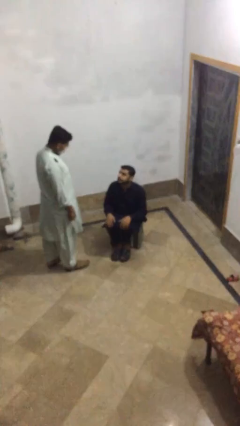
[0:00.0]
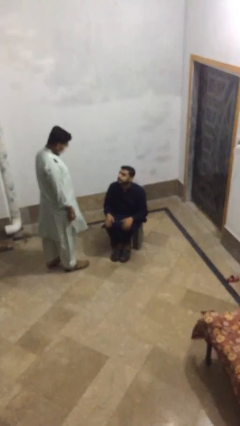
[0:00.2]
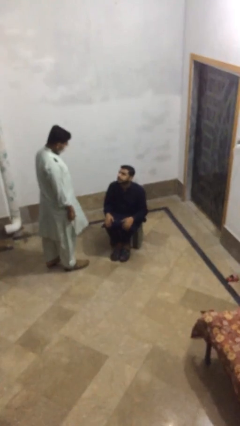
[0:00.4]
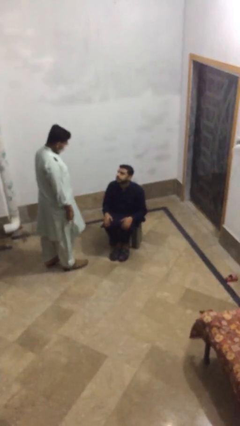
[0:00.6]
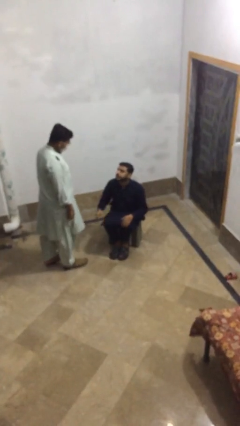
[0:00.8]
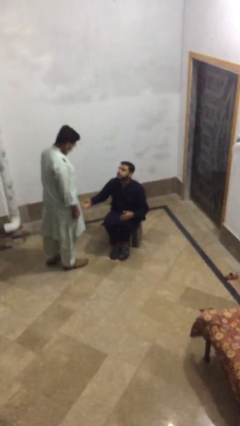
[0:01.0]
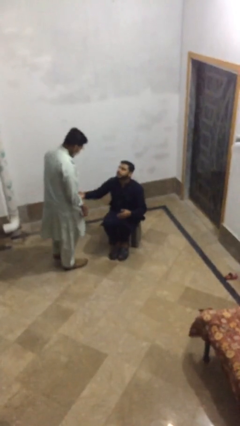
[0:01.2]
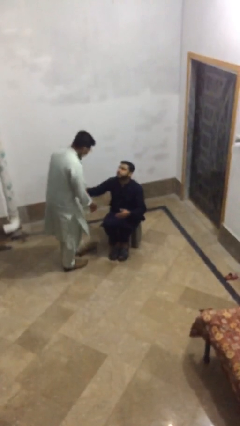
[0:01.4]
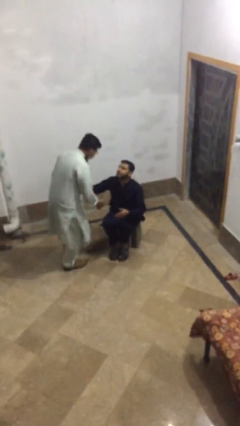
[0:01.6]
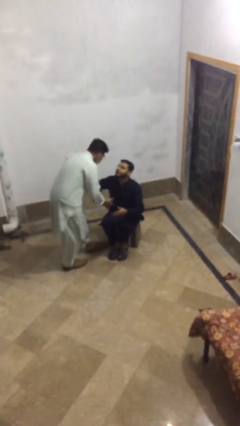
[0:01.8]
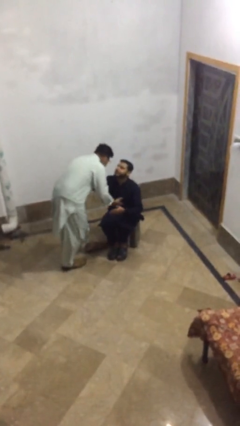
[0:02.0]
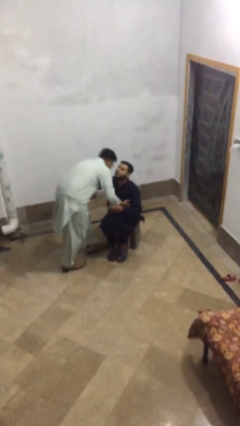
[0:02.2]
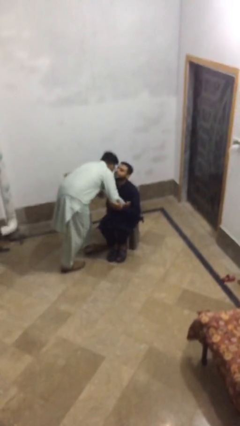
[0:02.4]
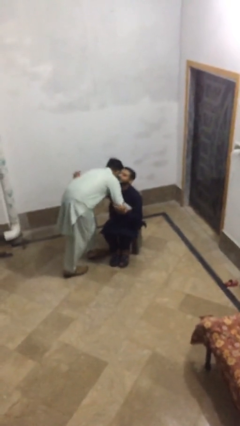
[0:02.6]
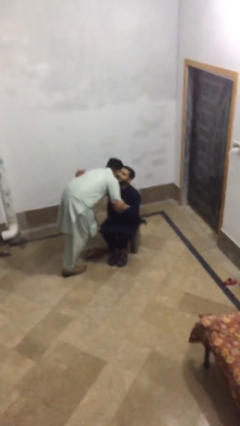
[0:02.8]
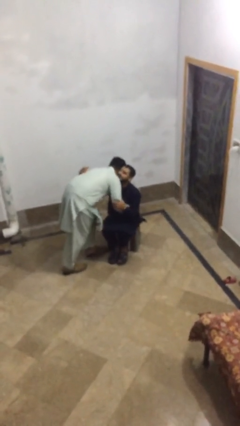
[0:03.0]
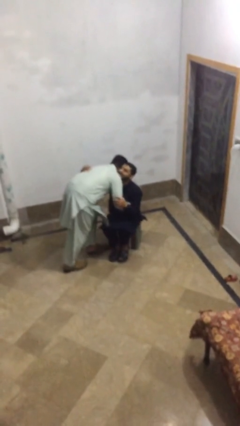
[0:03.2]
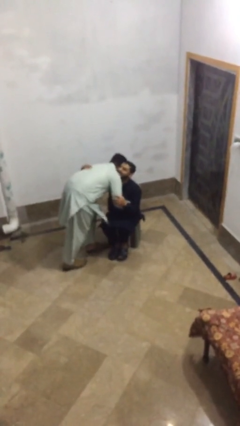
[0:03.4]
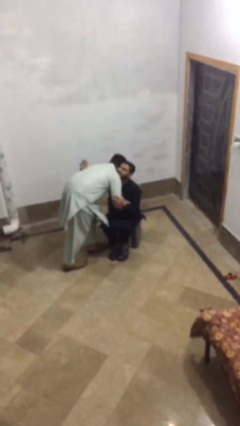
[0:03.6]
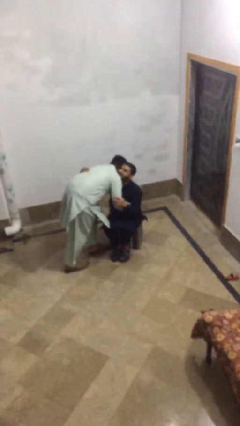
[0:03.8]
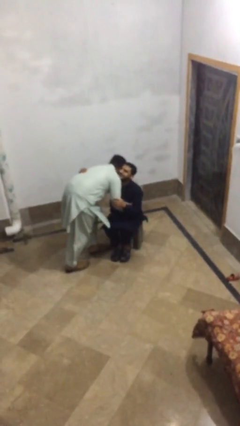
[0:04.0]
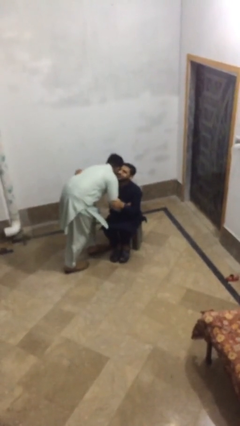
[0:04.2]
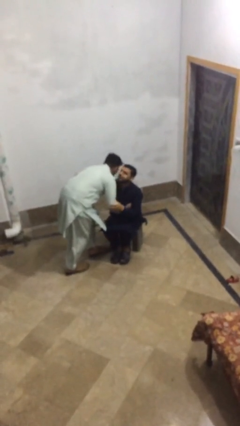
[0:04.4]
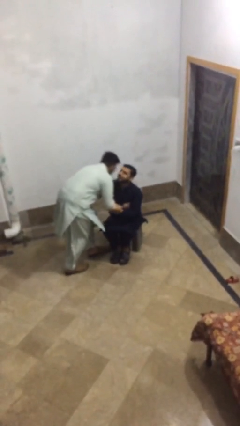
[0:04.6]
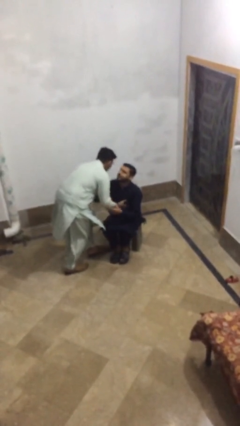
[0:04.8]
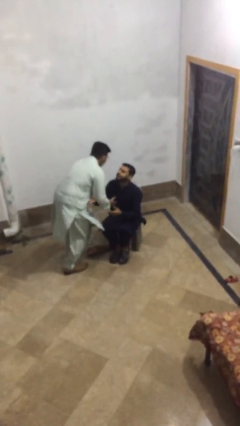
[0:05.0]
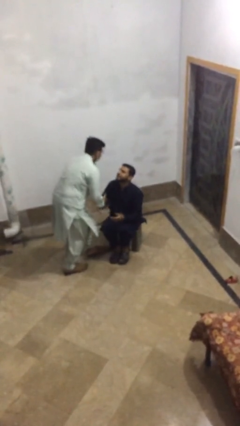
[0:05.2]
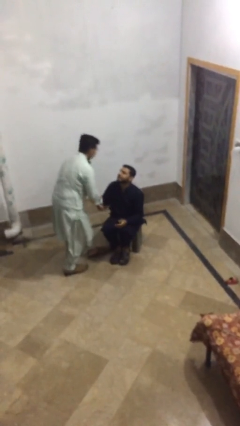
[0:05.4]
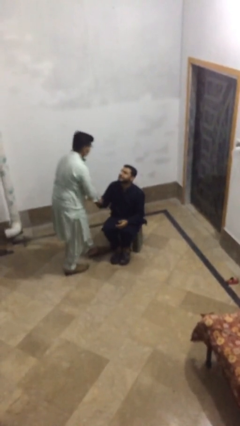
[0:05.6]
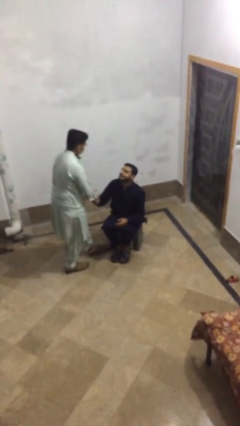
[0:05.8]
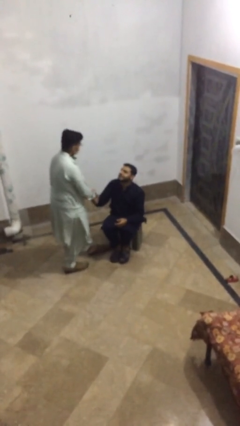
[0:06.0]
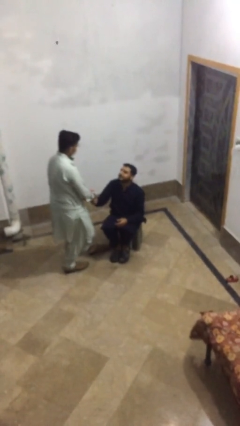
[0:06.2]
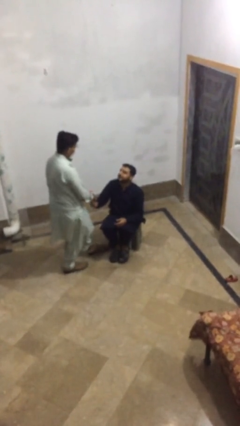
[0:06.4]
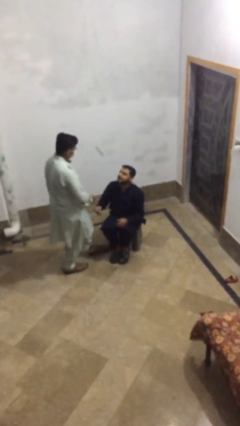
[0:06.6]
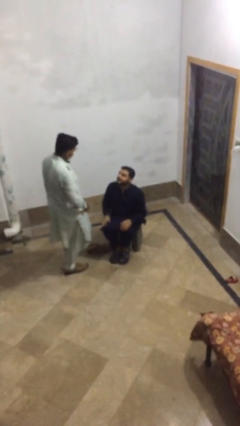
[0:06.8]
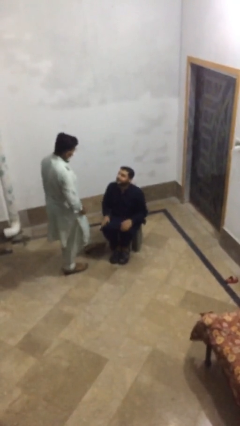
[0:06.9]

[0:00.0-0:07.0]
person embraces person

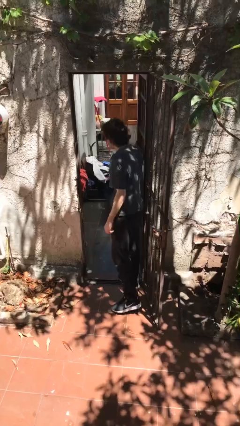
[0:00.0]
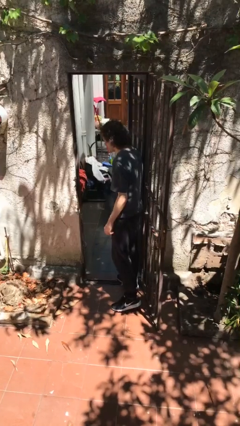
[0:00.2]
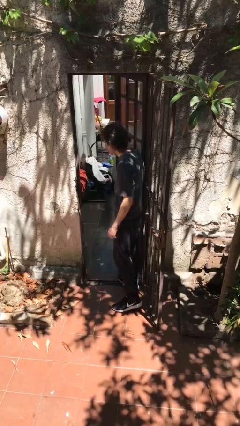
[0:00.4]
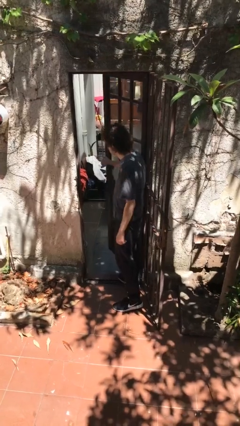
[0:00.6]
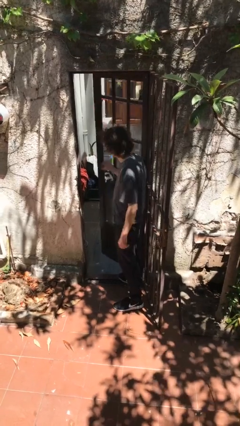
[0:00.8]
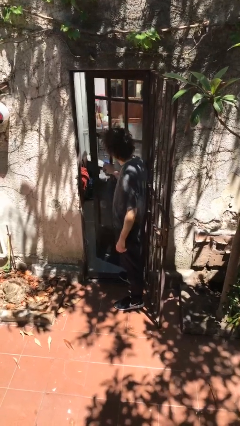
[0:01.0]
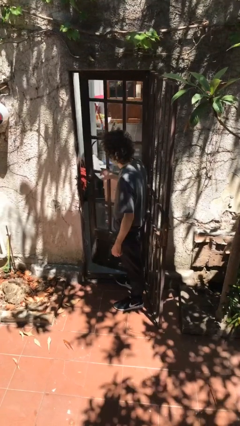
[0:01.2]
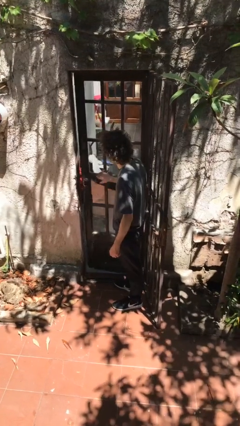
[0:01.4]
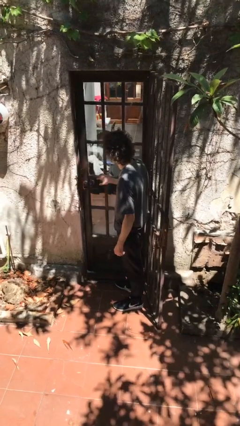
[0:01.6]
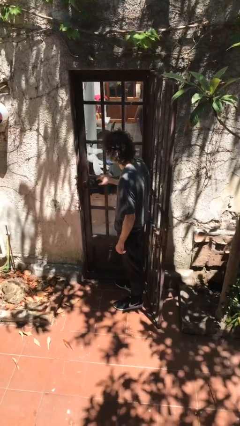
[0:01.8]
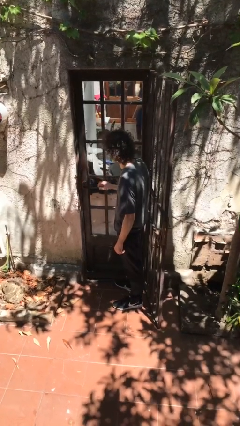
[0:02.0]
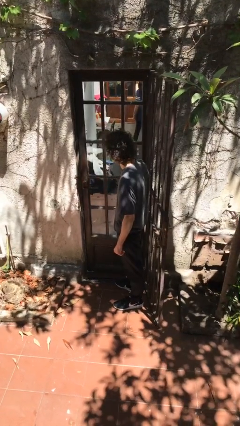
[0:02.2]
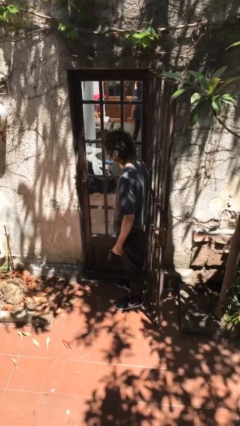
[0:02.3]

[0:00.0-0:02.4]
person closes facility door

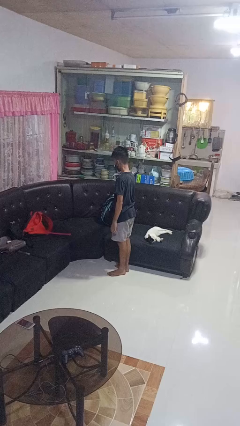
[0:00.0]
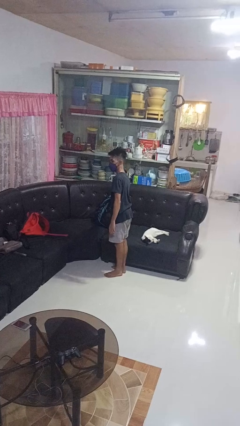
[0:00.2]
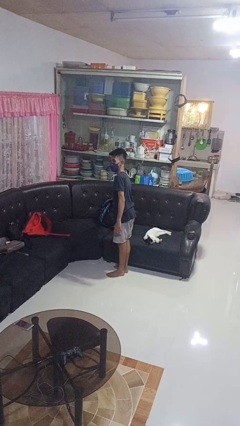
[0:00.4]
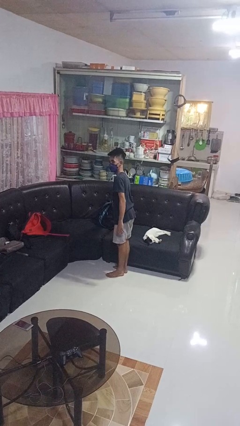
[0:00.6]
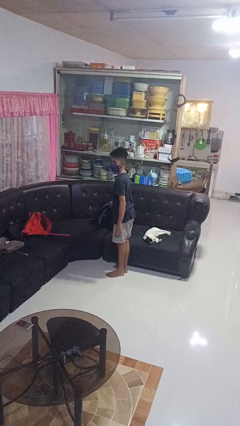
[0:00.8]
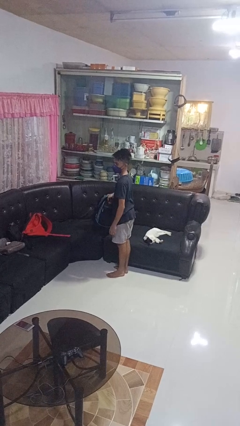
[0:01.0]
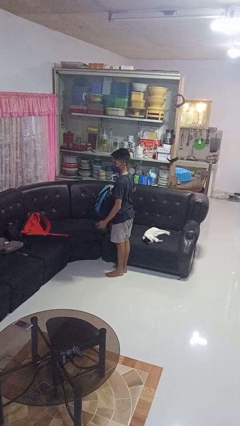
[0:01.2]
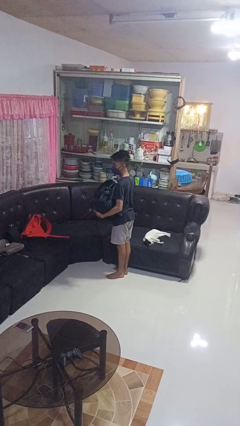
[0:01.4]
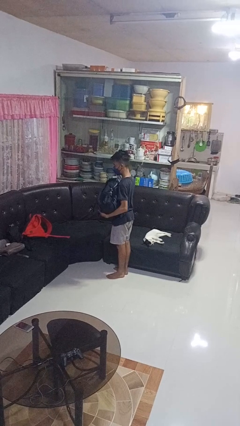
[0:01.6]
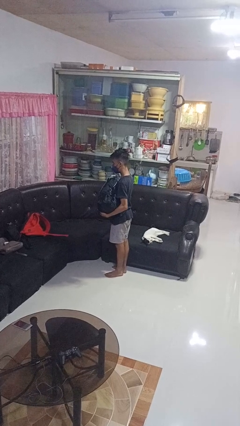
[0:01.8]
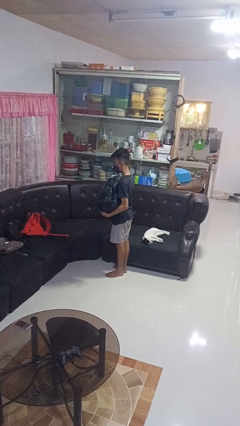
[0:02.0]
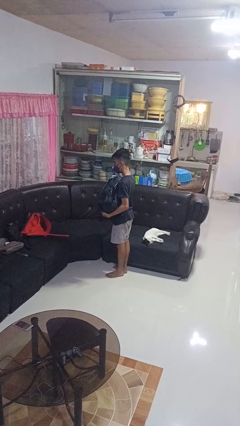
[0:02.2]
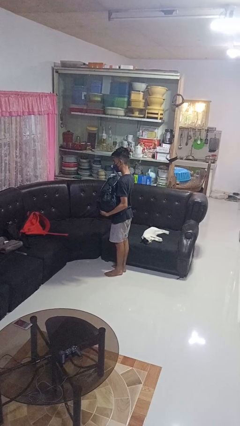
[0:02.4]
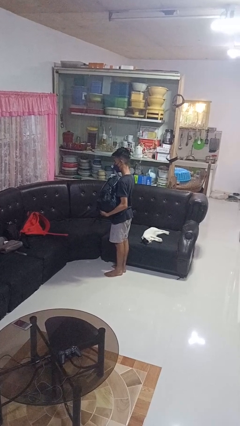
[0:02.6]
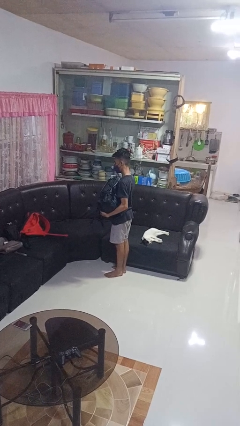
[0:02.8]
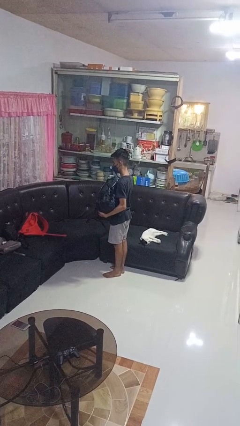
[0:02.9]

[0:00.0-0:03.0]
person picks up object from couch

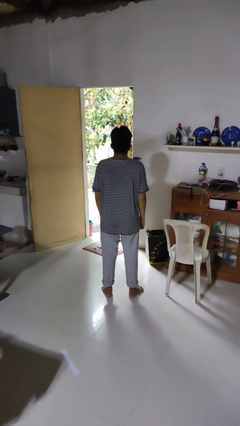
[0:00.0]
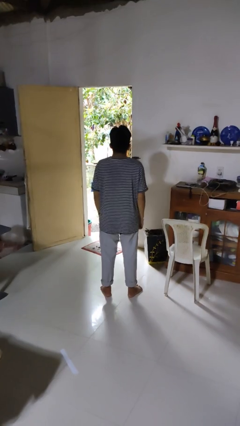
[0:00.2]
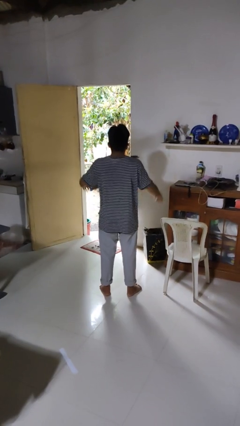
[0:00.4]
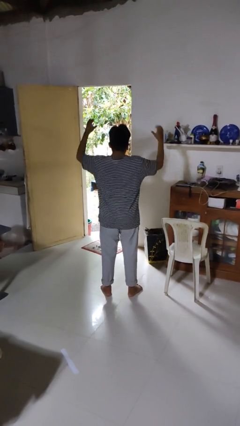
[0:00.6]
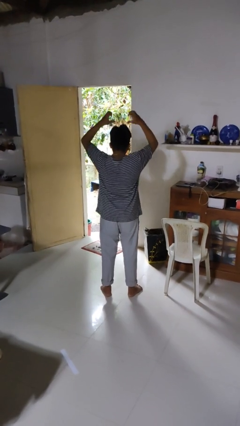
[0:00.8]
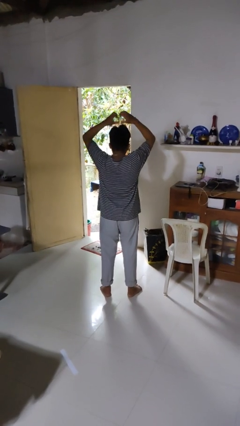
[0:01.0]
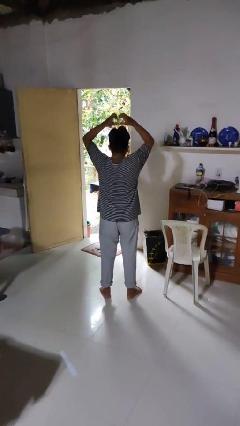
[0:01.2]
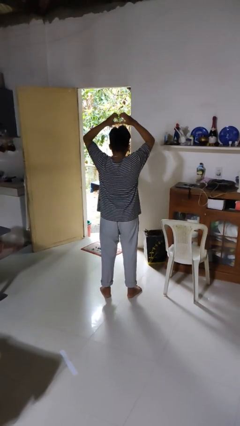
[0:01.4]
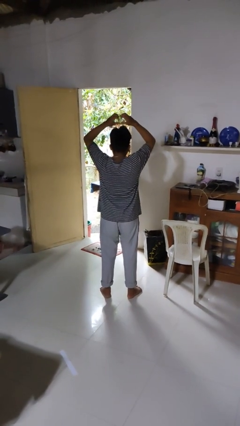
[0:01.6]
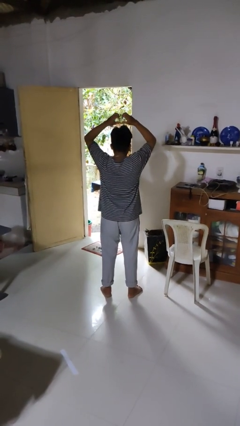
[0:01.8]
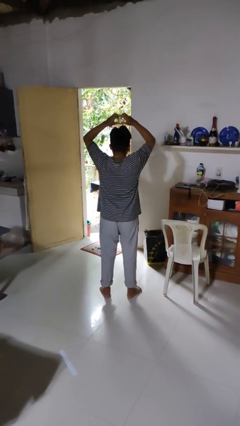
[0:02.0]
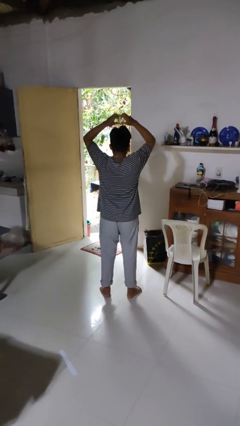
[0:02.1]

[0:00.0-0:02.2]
person gestures heart

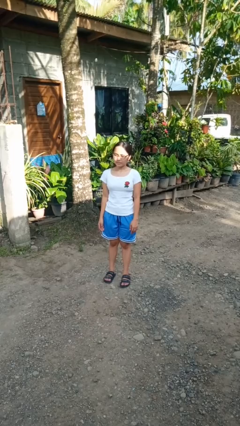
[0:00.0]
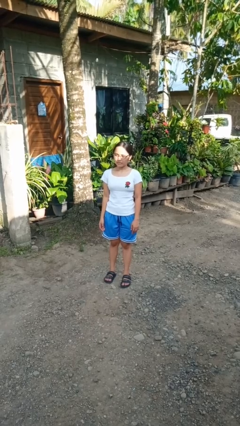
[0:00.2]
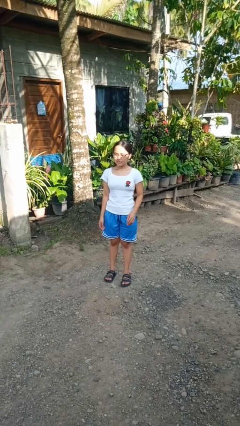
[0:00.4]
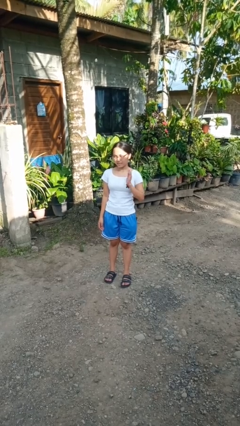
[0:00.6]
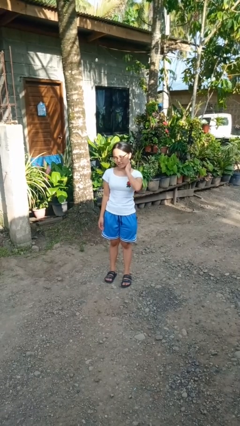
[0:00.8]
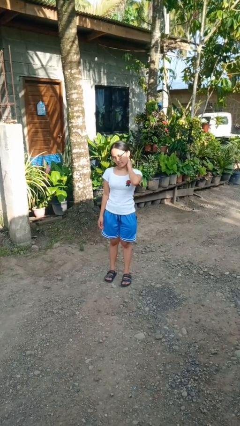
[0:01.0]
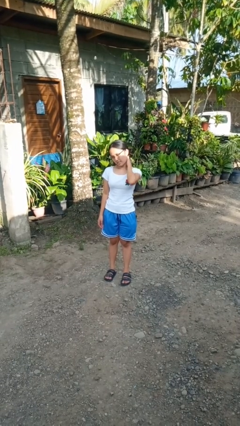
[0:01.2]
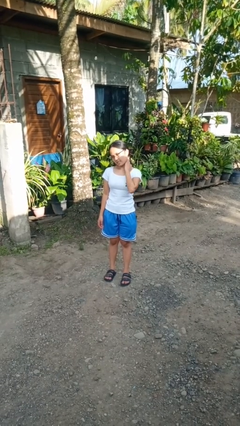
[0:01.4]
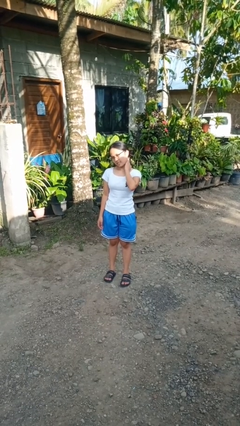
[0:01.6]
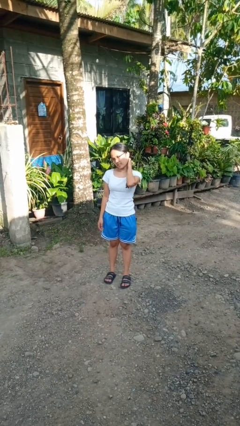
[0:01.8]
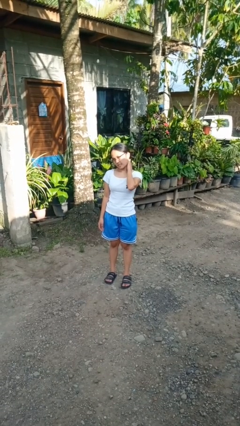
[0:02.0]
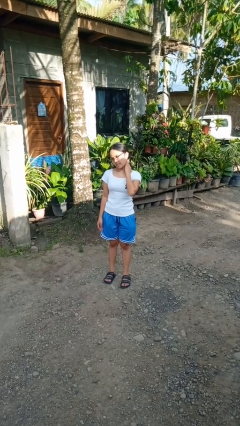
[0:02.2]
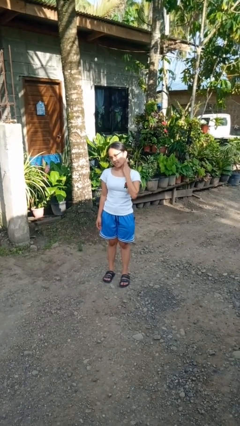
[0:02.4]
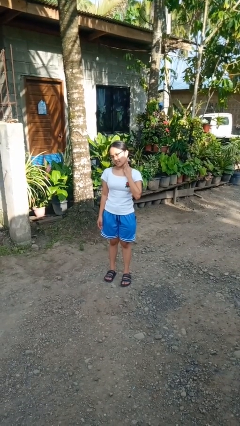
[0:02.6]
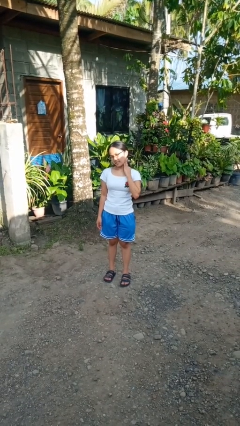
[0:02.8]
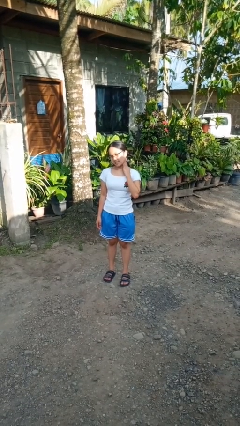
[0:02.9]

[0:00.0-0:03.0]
person rubs neck
